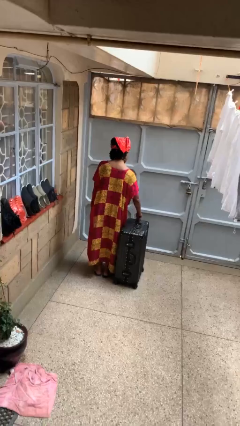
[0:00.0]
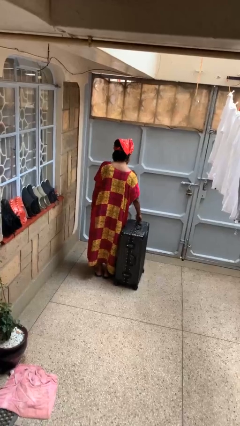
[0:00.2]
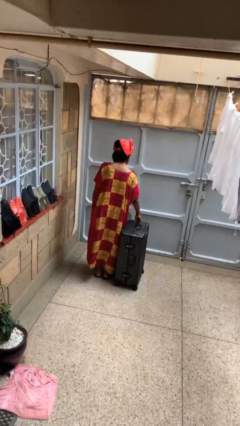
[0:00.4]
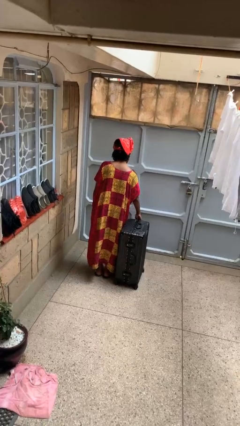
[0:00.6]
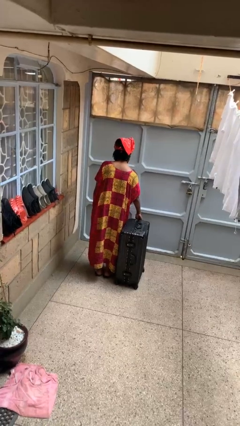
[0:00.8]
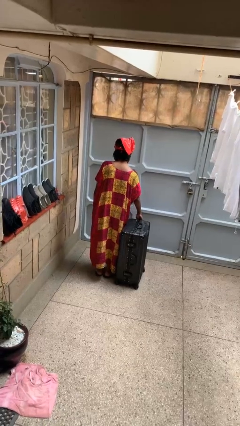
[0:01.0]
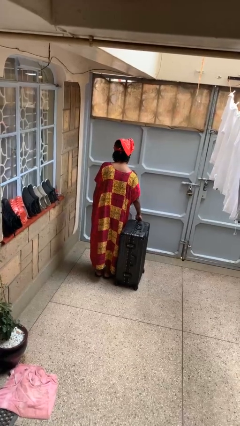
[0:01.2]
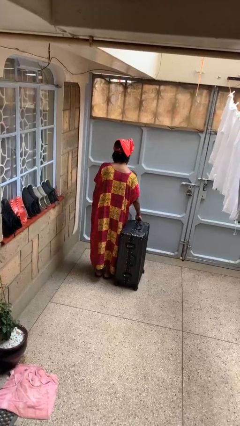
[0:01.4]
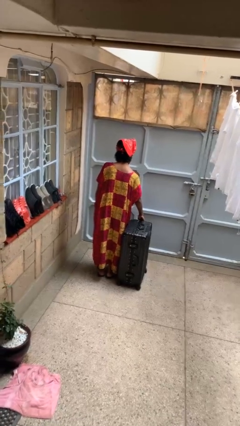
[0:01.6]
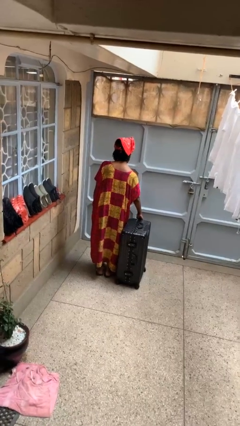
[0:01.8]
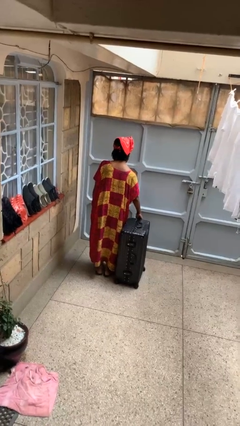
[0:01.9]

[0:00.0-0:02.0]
person closes suitcase

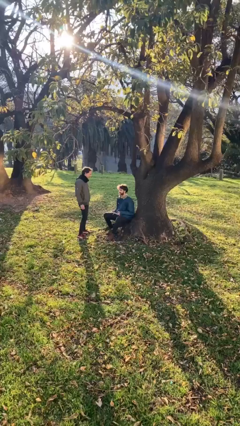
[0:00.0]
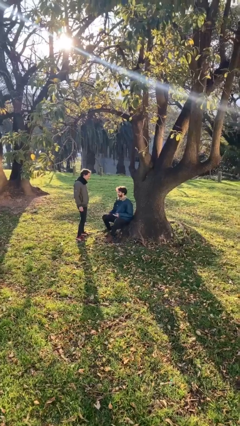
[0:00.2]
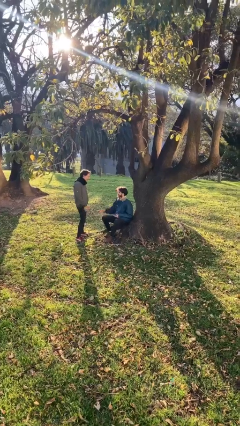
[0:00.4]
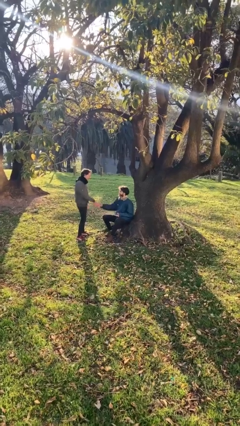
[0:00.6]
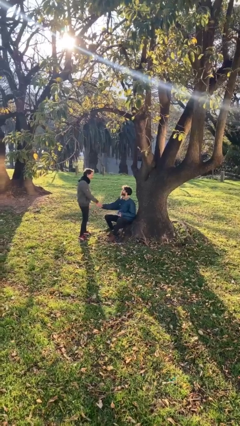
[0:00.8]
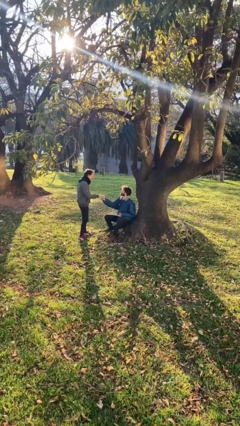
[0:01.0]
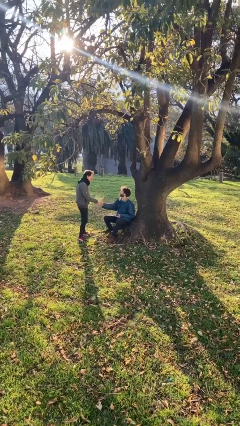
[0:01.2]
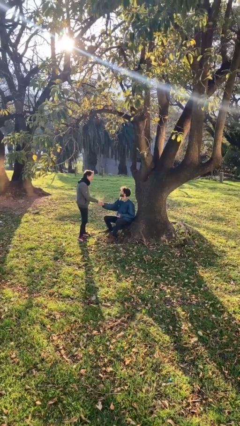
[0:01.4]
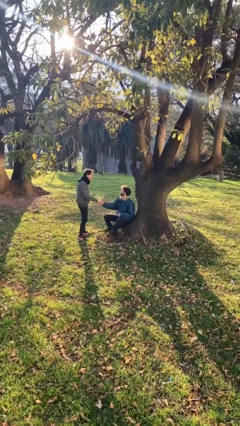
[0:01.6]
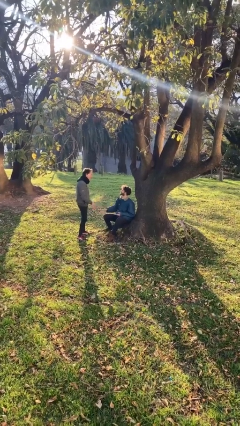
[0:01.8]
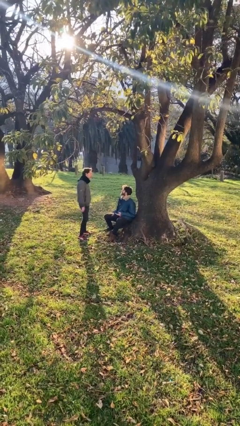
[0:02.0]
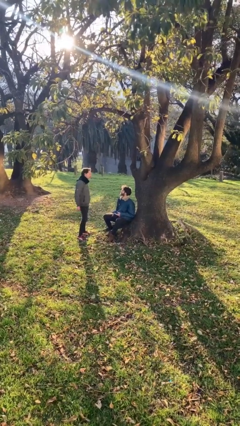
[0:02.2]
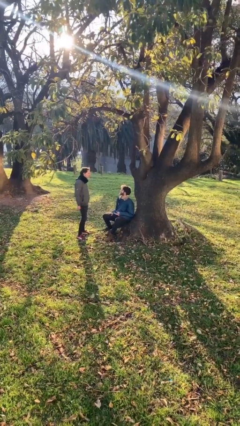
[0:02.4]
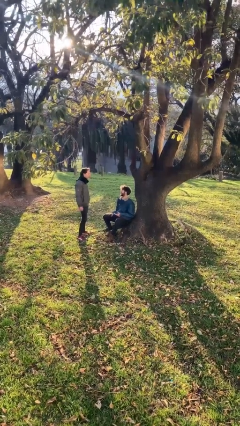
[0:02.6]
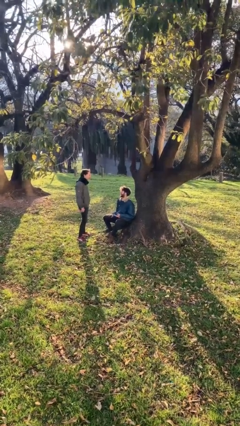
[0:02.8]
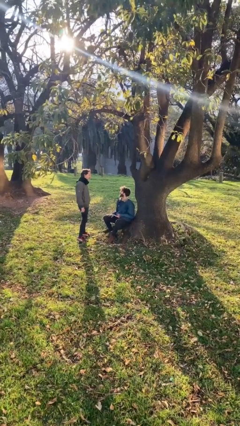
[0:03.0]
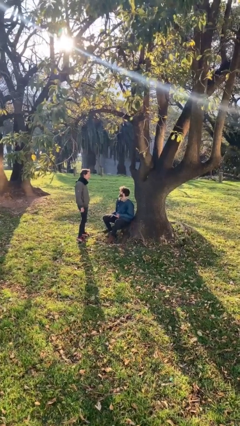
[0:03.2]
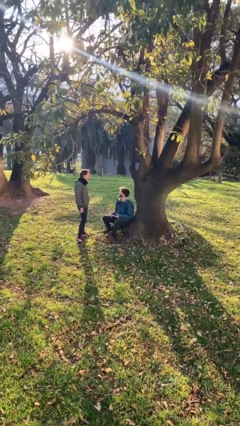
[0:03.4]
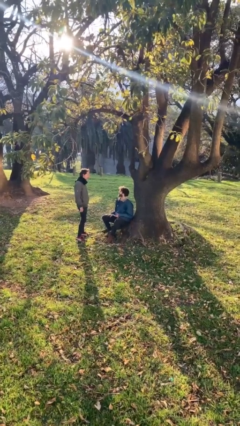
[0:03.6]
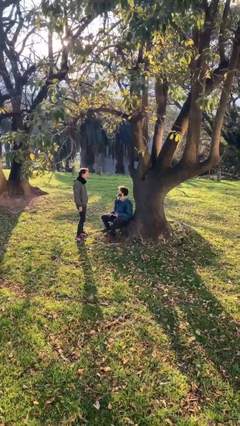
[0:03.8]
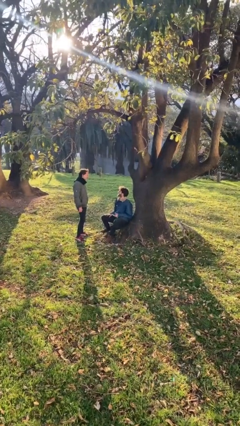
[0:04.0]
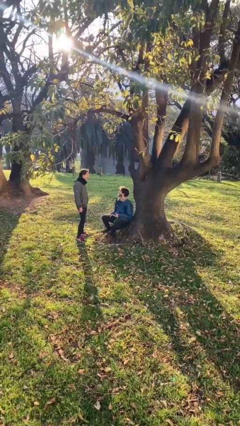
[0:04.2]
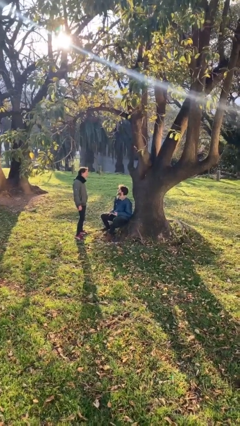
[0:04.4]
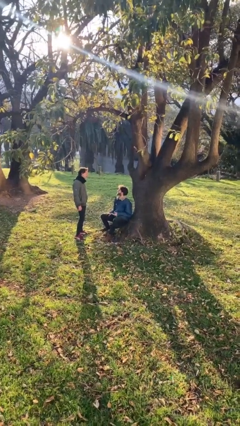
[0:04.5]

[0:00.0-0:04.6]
person shakes hand

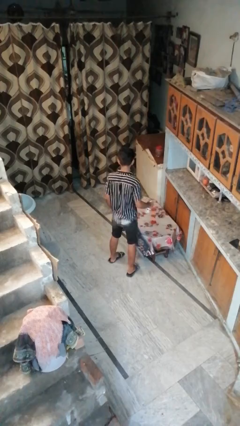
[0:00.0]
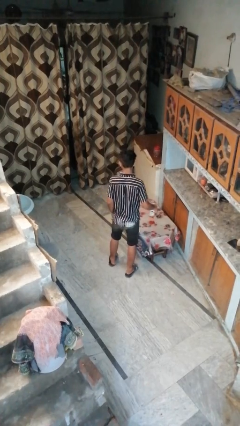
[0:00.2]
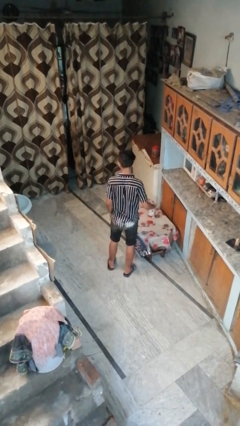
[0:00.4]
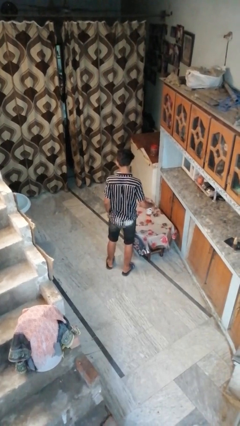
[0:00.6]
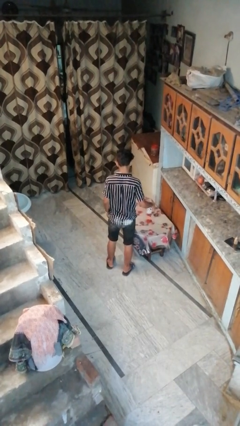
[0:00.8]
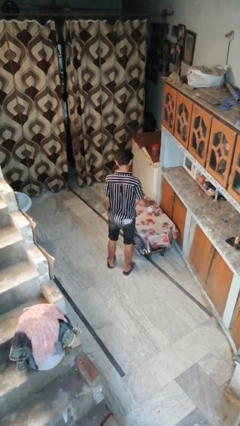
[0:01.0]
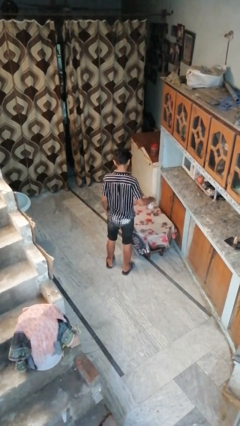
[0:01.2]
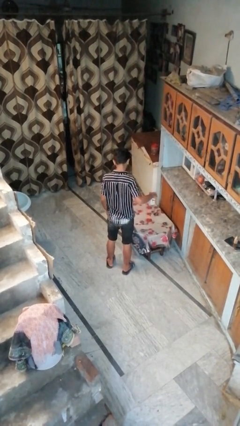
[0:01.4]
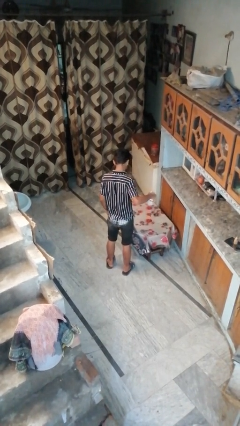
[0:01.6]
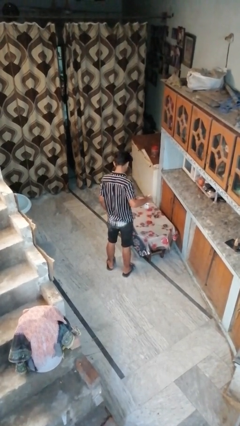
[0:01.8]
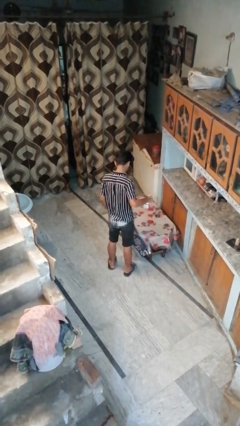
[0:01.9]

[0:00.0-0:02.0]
person sprays from bottle

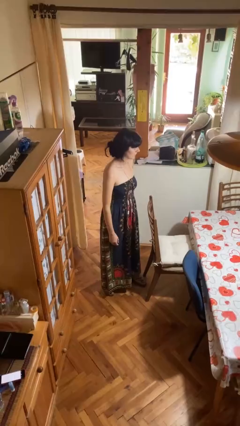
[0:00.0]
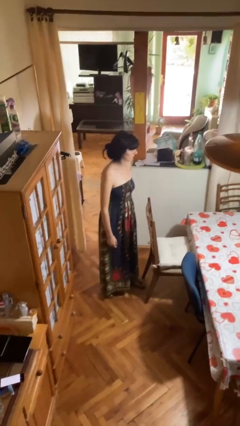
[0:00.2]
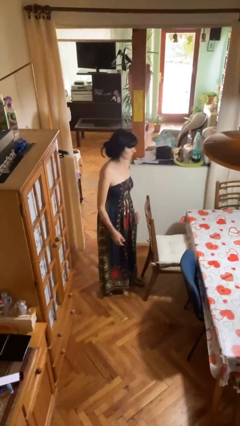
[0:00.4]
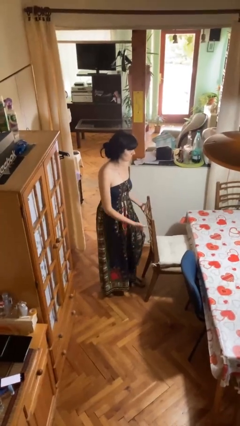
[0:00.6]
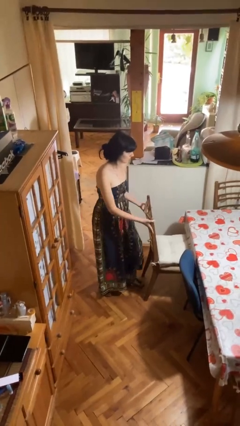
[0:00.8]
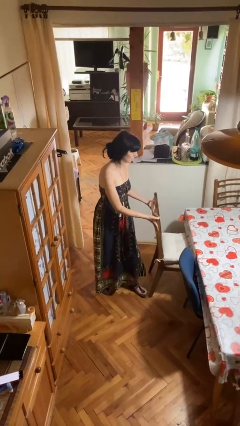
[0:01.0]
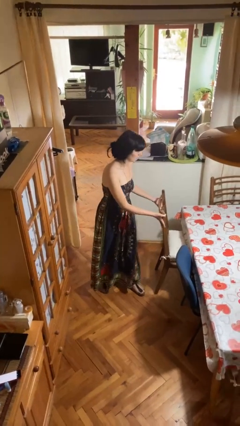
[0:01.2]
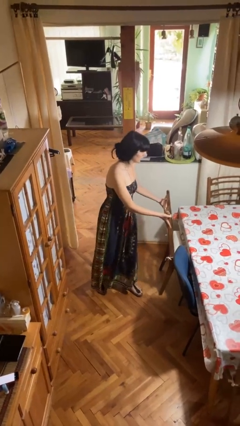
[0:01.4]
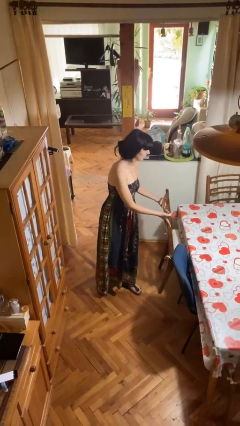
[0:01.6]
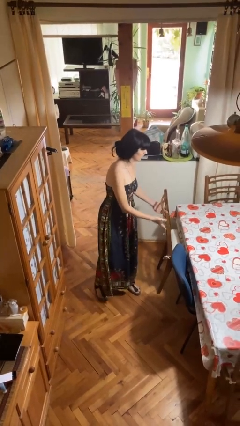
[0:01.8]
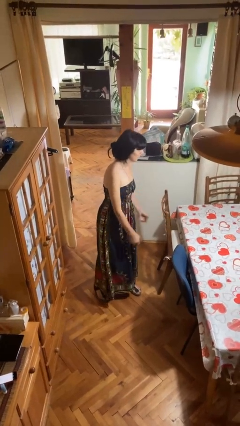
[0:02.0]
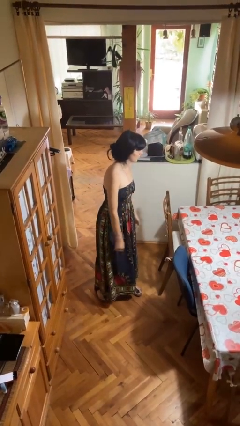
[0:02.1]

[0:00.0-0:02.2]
person pushes in chair

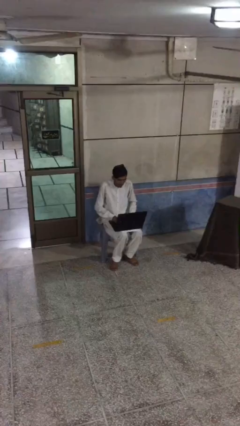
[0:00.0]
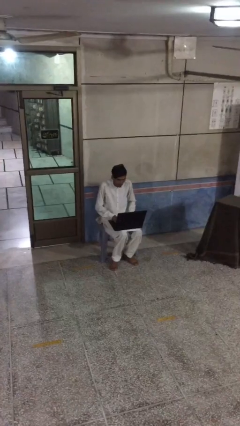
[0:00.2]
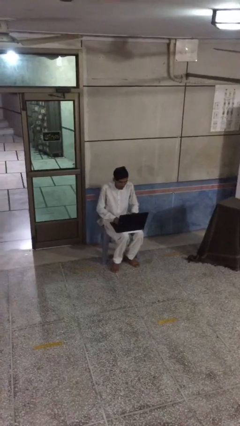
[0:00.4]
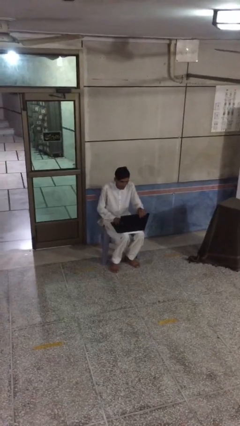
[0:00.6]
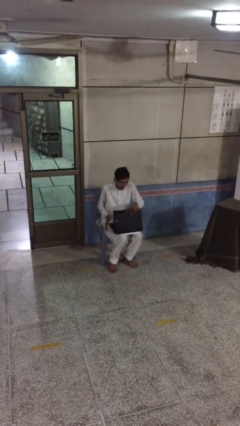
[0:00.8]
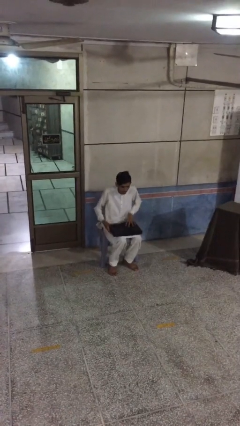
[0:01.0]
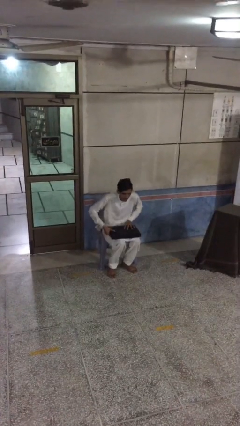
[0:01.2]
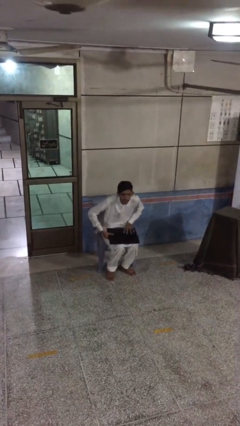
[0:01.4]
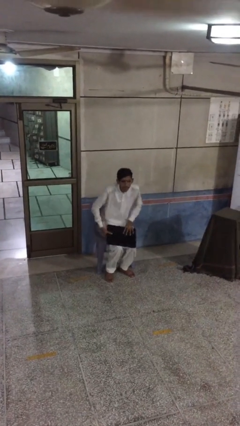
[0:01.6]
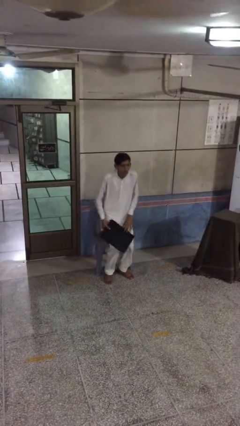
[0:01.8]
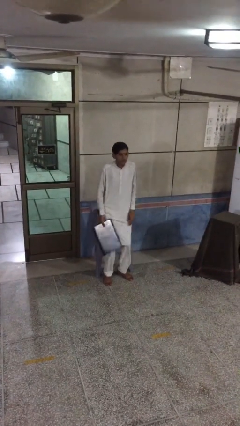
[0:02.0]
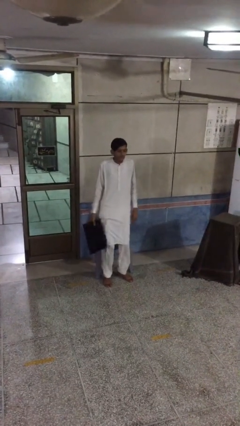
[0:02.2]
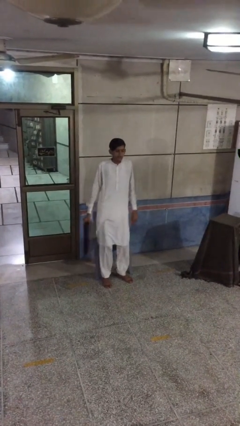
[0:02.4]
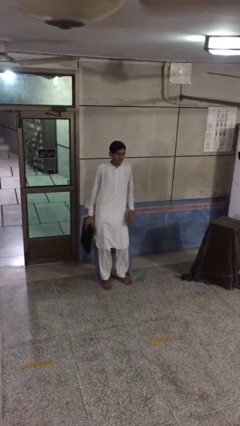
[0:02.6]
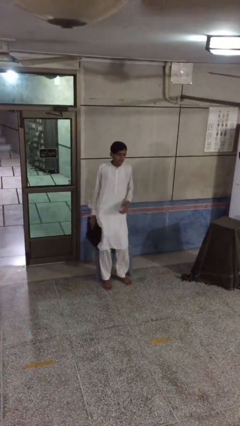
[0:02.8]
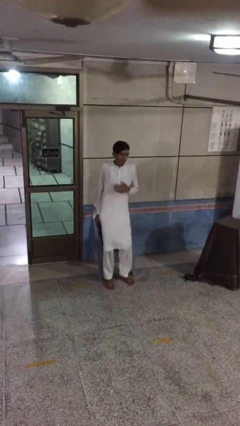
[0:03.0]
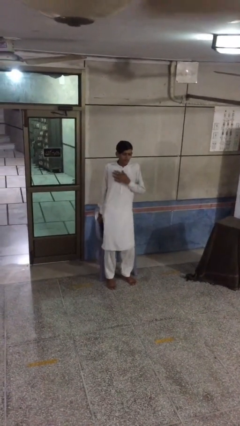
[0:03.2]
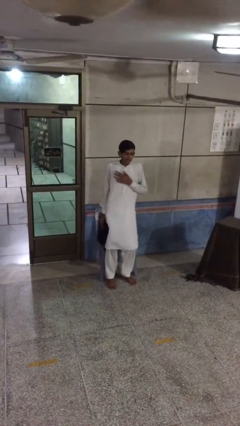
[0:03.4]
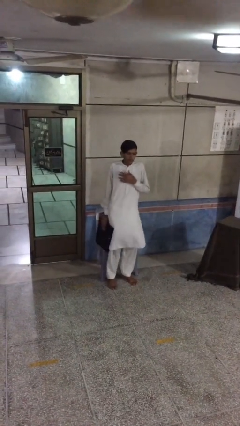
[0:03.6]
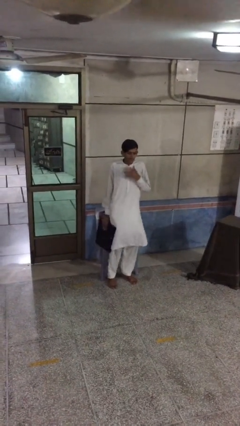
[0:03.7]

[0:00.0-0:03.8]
person stands up

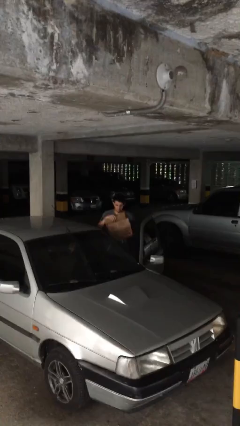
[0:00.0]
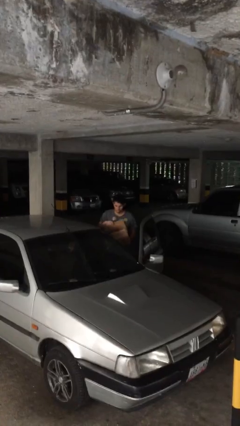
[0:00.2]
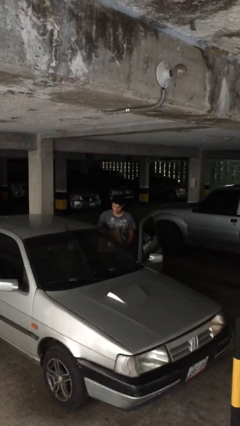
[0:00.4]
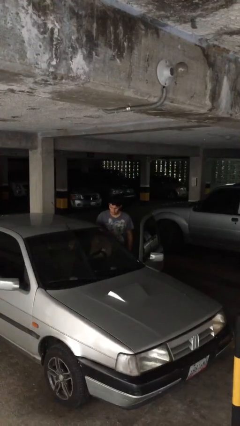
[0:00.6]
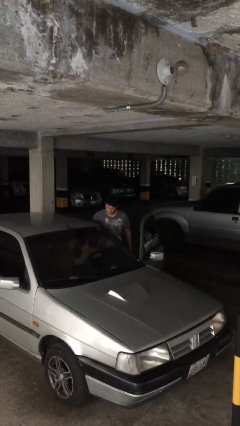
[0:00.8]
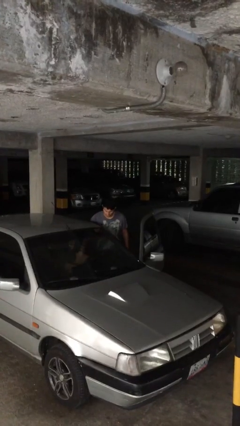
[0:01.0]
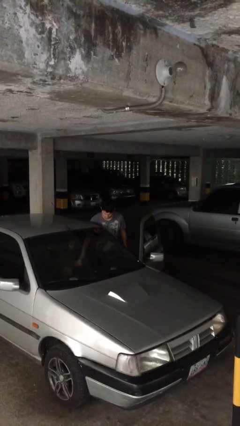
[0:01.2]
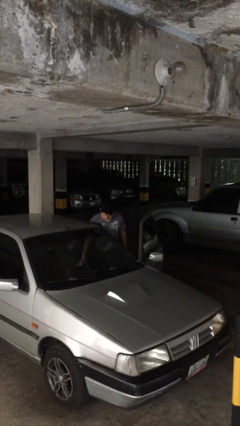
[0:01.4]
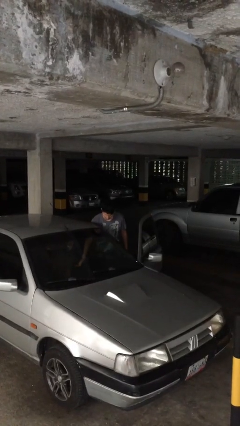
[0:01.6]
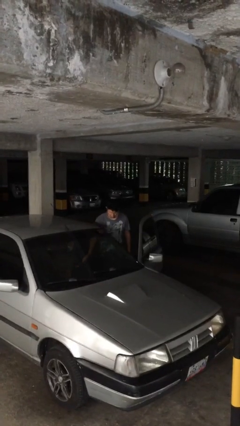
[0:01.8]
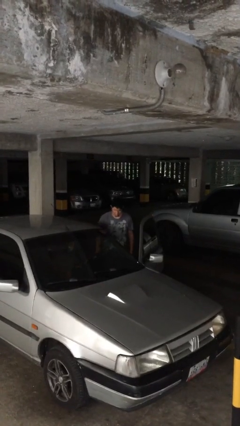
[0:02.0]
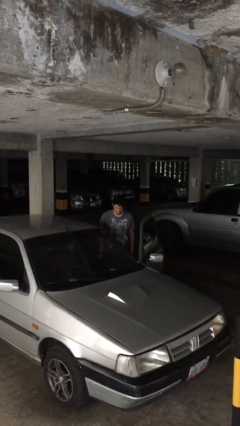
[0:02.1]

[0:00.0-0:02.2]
person loads car

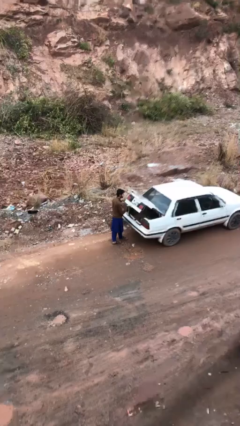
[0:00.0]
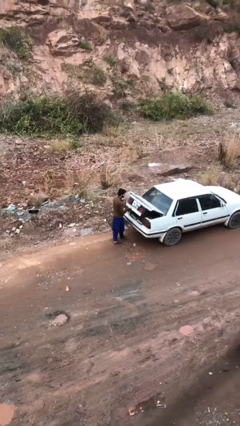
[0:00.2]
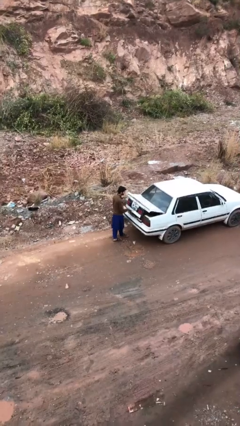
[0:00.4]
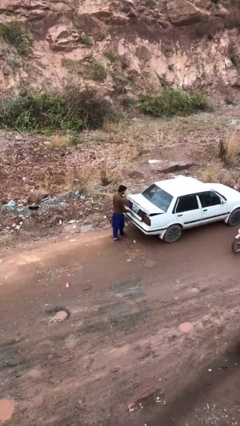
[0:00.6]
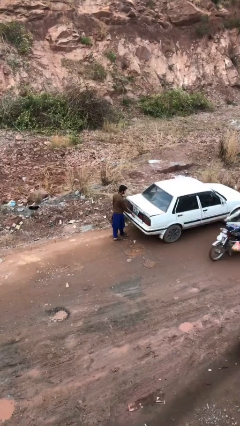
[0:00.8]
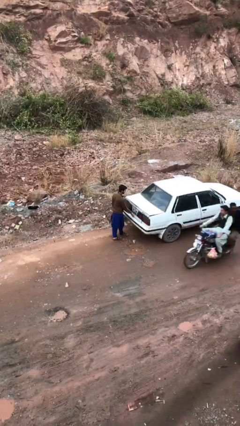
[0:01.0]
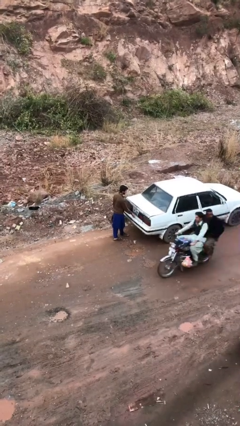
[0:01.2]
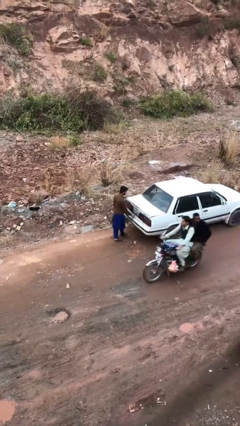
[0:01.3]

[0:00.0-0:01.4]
person closes car trunk
